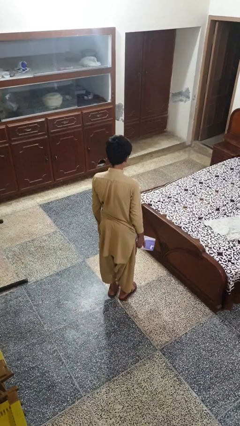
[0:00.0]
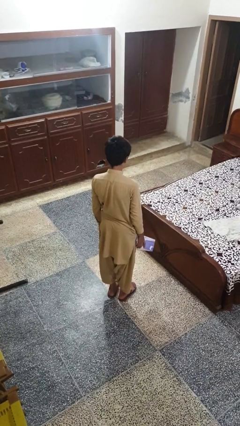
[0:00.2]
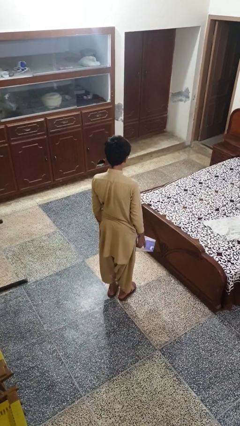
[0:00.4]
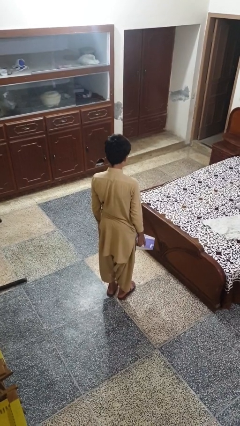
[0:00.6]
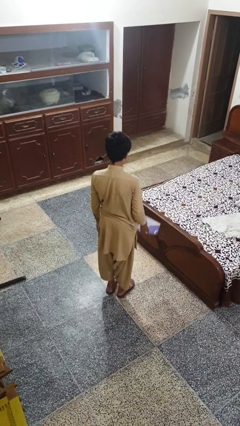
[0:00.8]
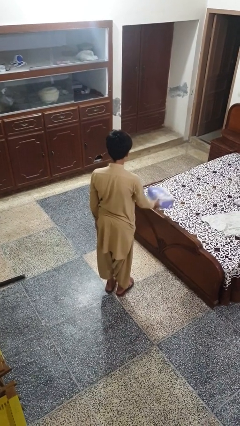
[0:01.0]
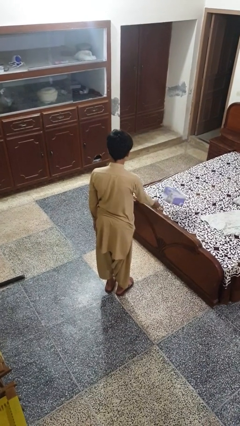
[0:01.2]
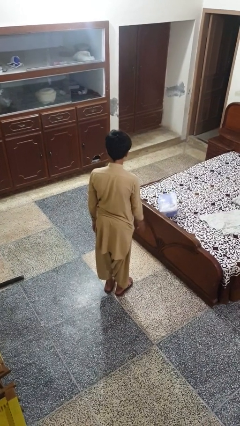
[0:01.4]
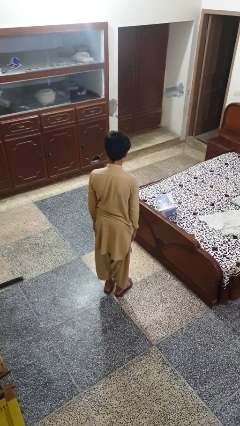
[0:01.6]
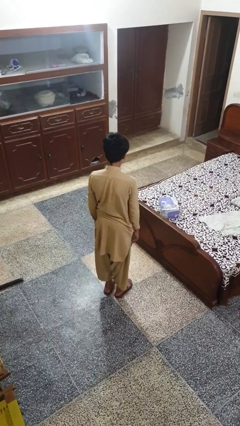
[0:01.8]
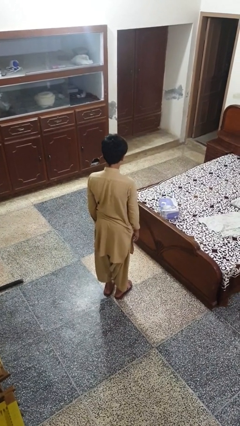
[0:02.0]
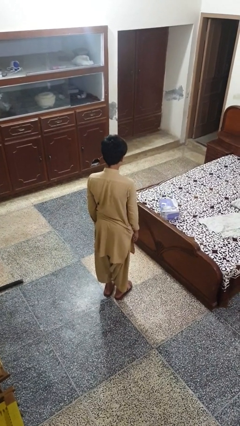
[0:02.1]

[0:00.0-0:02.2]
person throws object on bed

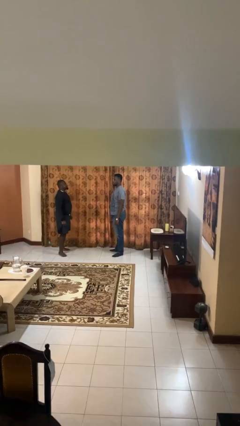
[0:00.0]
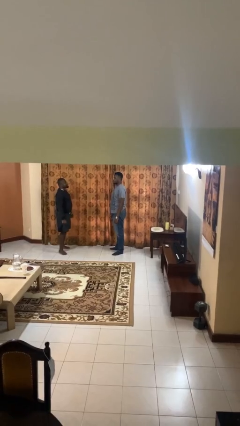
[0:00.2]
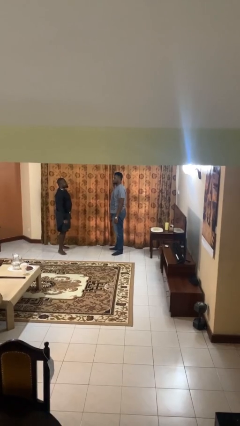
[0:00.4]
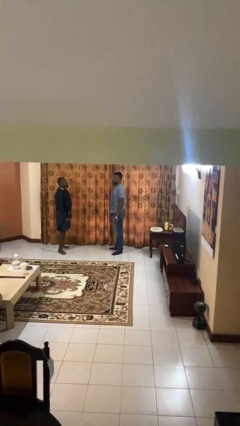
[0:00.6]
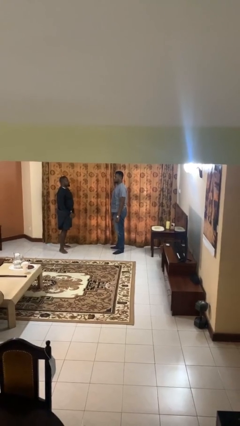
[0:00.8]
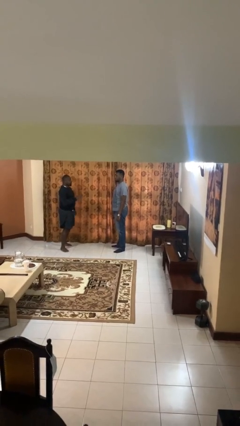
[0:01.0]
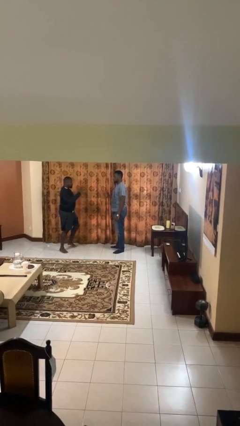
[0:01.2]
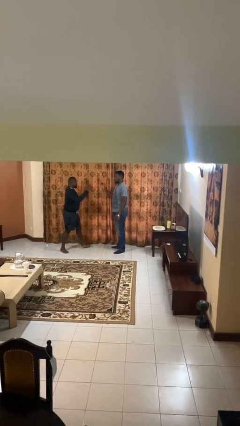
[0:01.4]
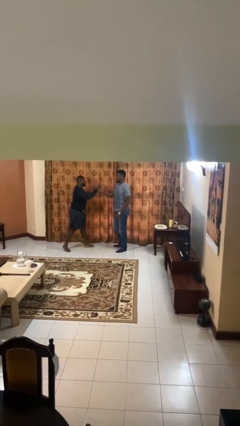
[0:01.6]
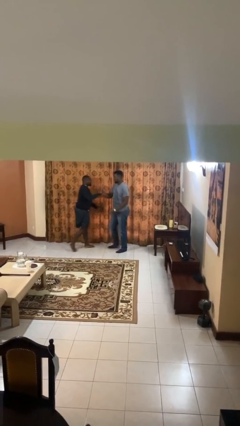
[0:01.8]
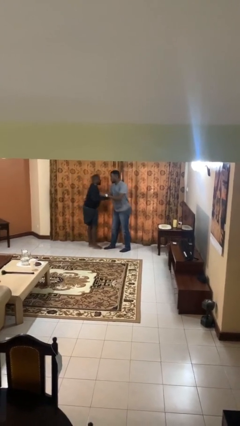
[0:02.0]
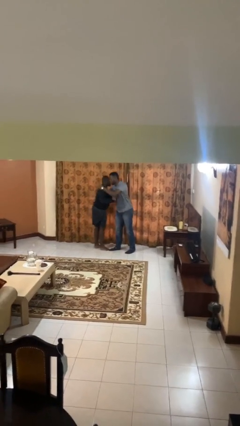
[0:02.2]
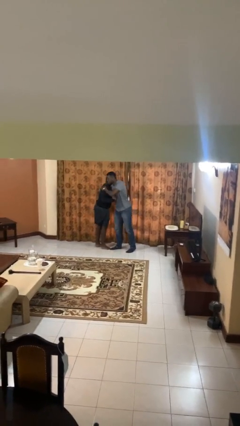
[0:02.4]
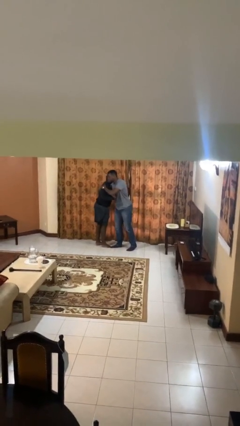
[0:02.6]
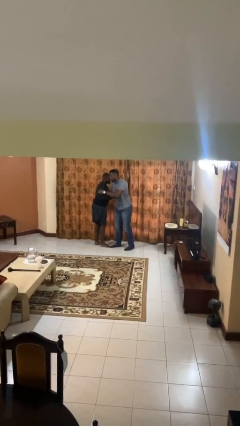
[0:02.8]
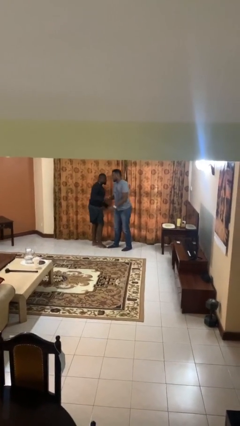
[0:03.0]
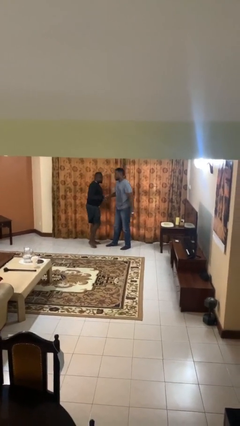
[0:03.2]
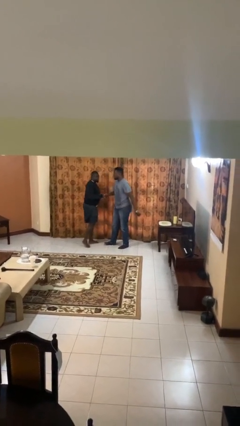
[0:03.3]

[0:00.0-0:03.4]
person embraces person

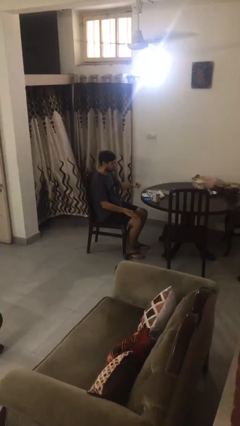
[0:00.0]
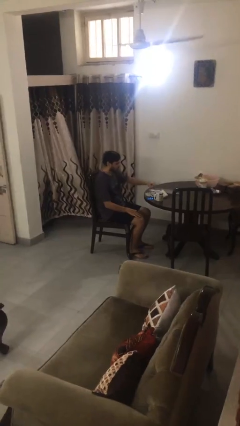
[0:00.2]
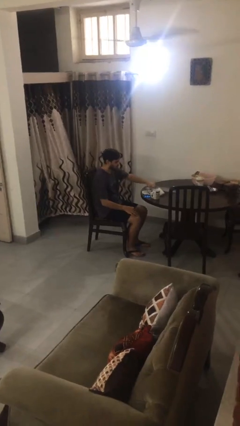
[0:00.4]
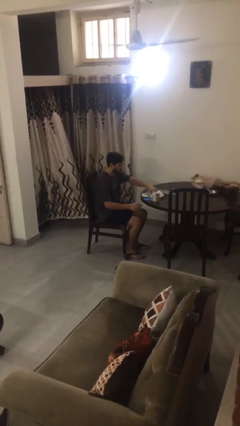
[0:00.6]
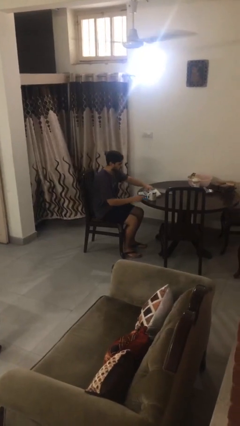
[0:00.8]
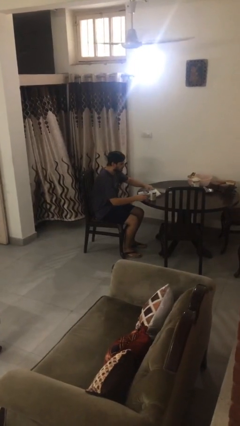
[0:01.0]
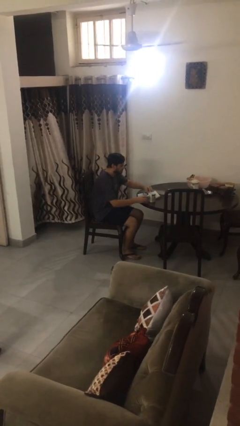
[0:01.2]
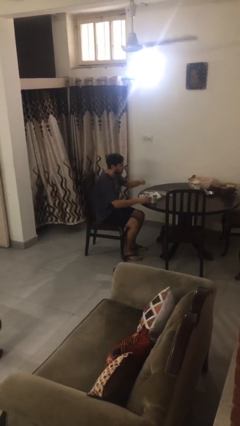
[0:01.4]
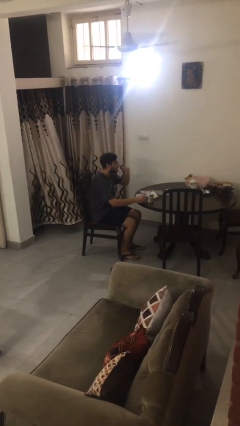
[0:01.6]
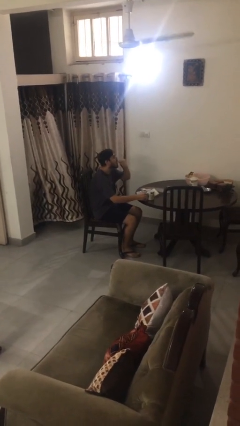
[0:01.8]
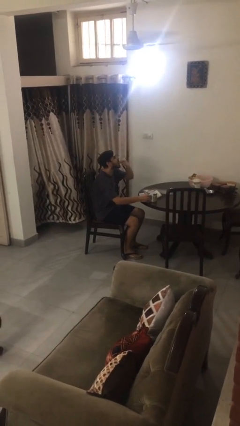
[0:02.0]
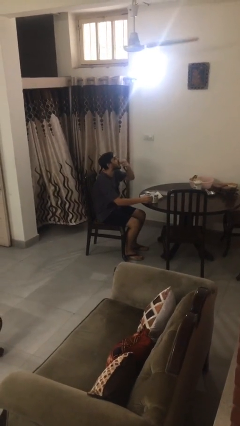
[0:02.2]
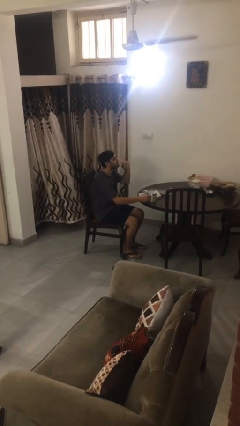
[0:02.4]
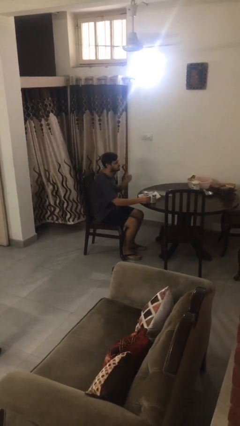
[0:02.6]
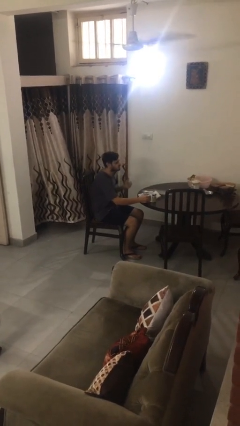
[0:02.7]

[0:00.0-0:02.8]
person takes medicine pills

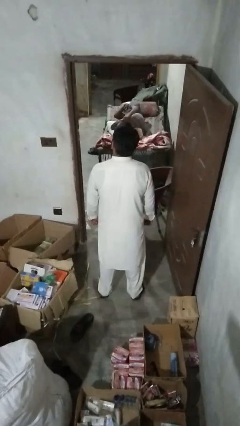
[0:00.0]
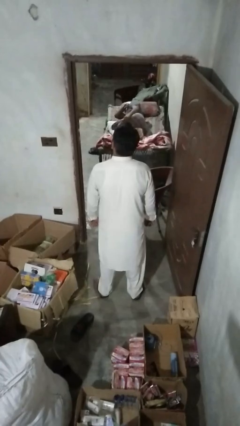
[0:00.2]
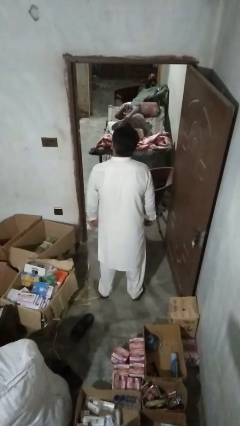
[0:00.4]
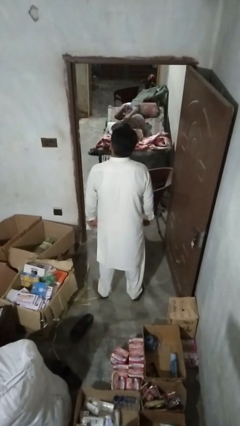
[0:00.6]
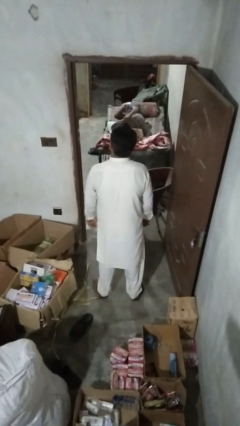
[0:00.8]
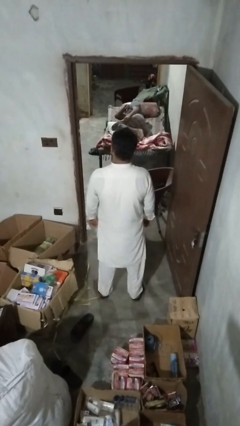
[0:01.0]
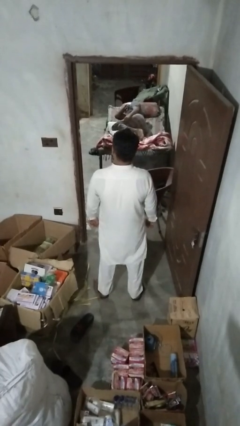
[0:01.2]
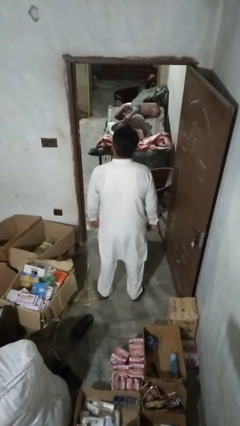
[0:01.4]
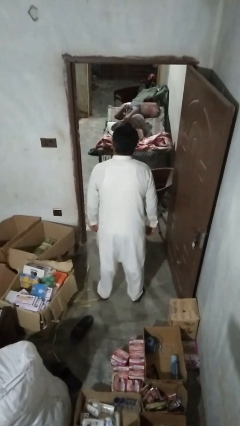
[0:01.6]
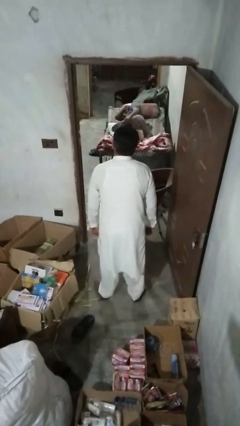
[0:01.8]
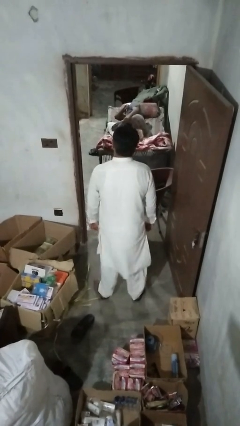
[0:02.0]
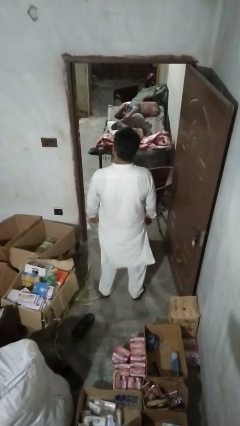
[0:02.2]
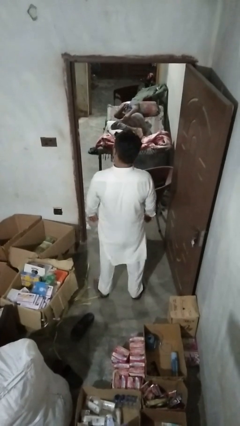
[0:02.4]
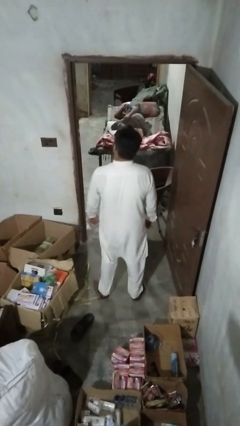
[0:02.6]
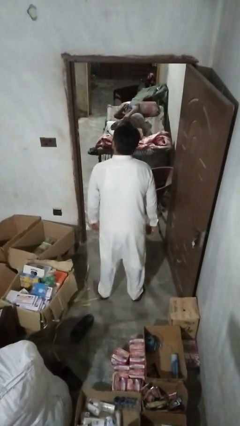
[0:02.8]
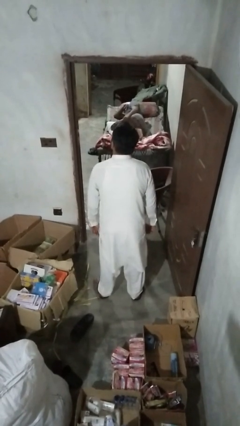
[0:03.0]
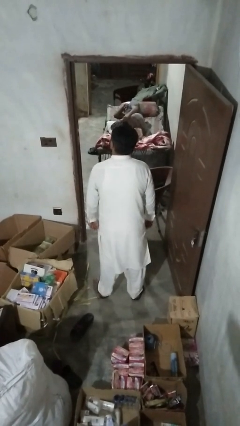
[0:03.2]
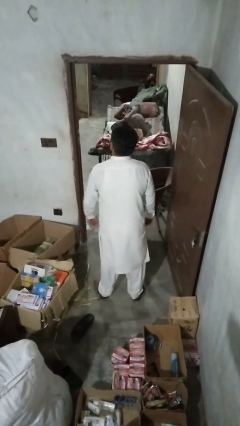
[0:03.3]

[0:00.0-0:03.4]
person wiggles hips

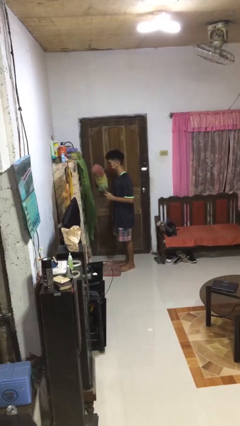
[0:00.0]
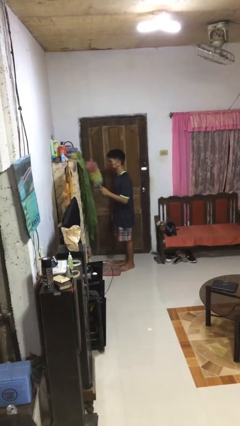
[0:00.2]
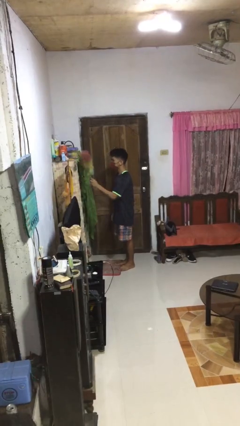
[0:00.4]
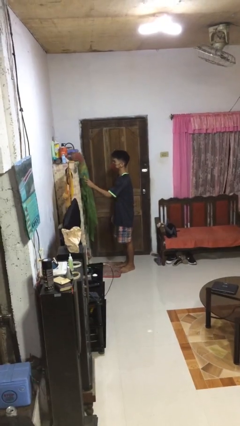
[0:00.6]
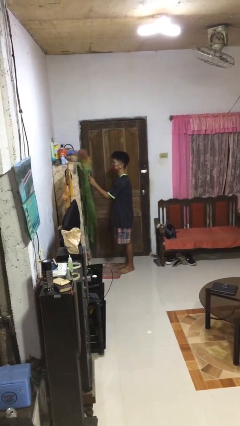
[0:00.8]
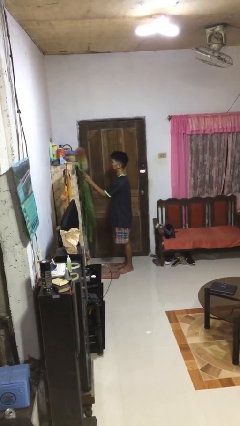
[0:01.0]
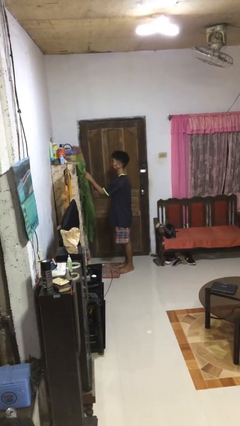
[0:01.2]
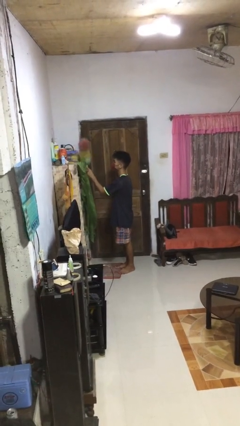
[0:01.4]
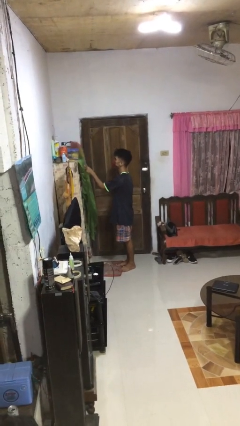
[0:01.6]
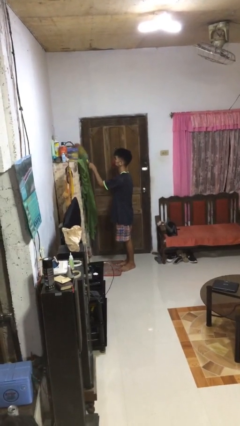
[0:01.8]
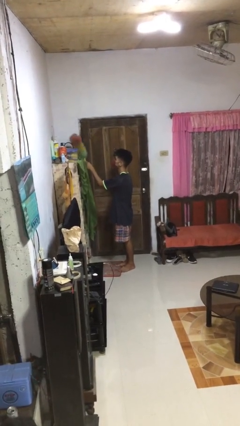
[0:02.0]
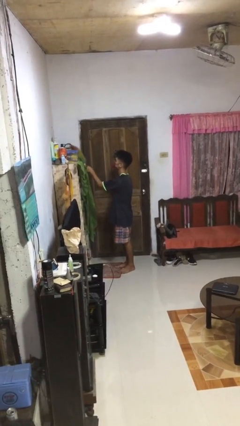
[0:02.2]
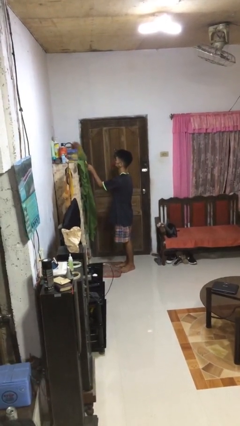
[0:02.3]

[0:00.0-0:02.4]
person dusts furniture

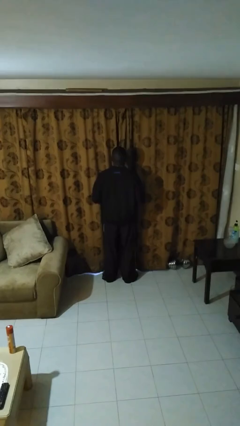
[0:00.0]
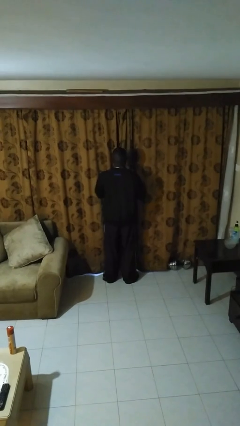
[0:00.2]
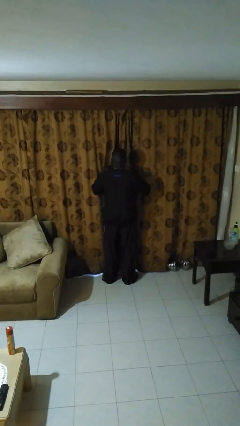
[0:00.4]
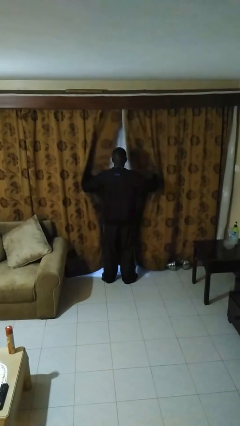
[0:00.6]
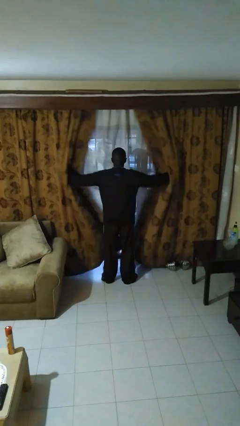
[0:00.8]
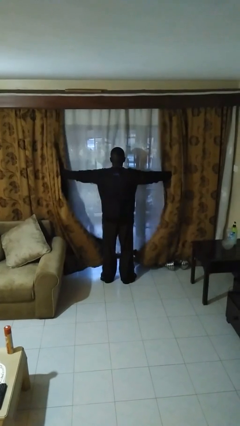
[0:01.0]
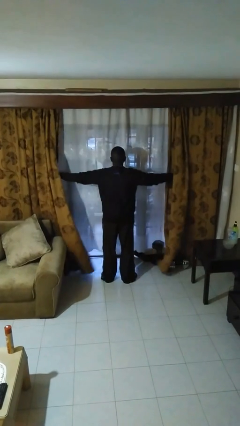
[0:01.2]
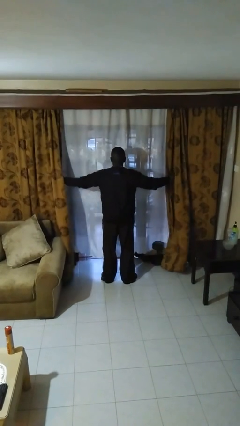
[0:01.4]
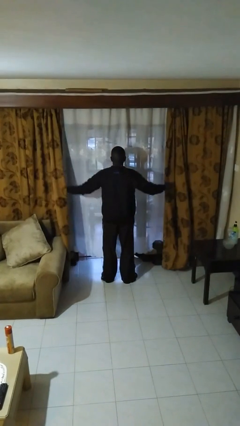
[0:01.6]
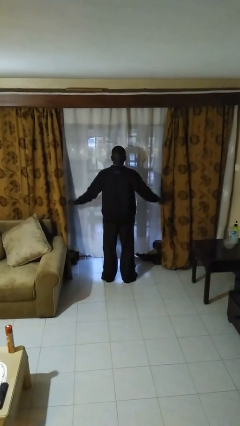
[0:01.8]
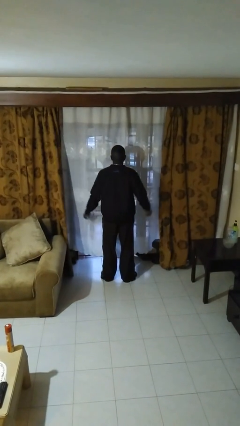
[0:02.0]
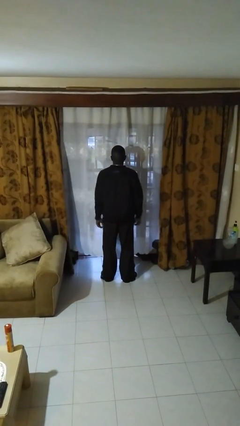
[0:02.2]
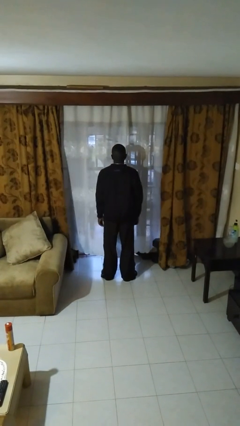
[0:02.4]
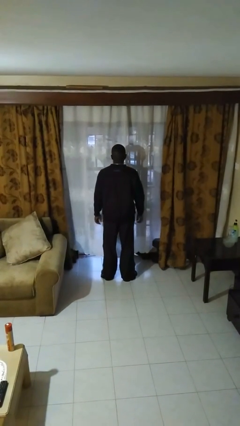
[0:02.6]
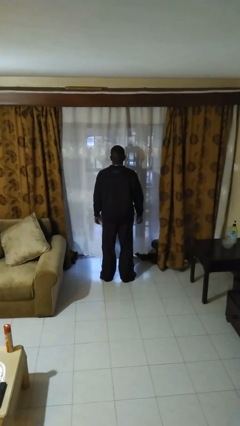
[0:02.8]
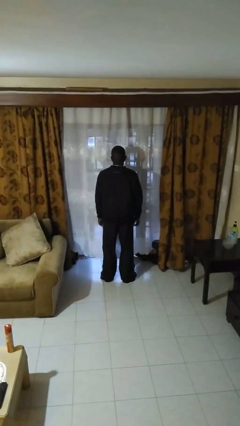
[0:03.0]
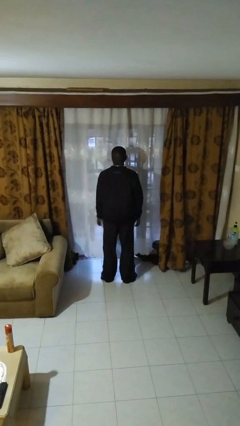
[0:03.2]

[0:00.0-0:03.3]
person opens curtains
